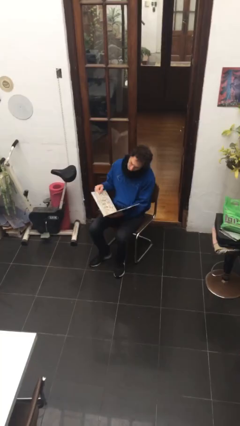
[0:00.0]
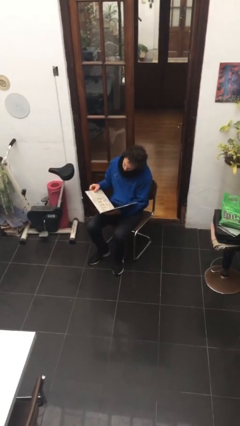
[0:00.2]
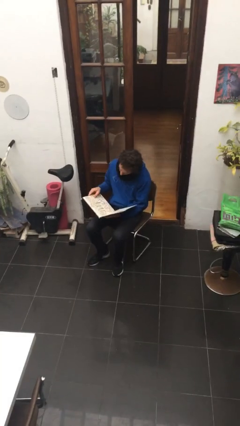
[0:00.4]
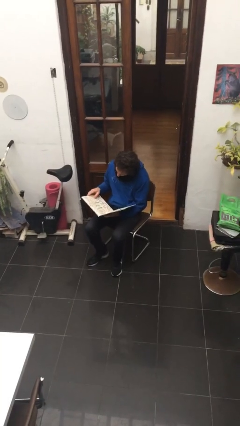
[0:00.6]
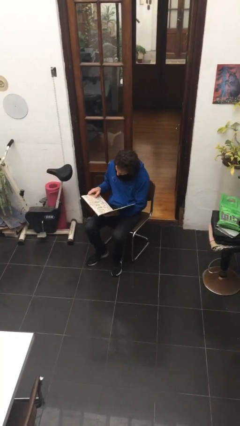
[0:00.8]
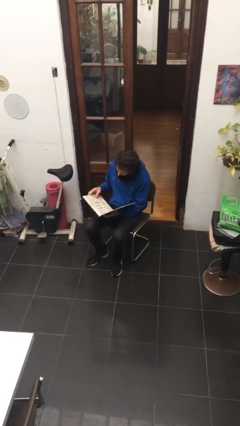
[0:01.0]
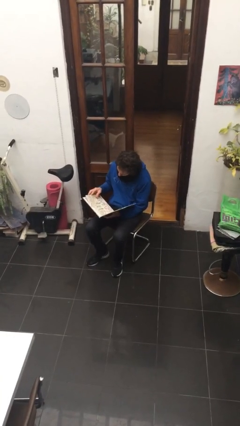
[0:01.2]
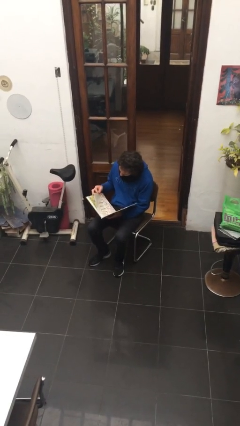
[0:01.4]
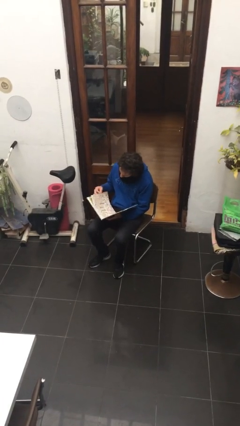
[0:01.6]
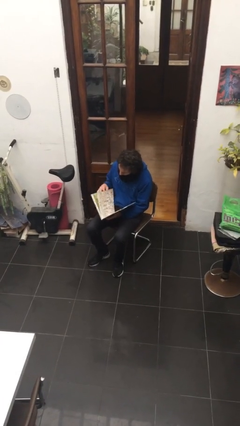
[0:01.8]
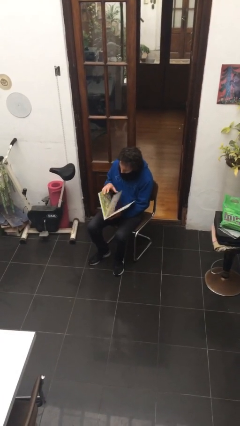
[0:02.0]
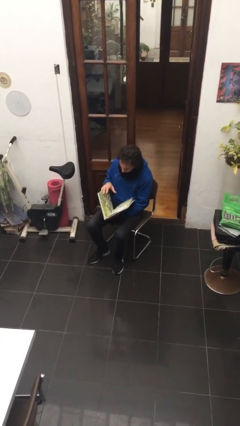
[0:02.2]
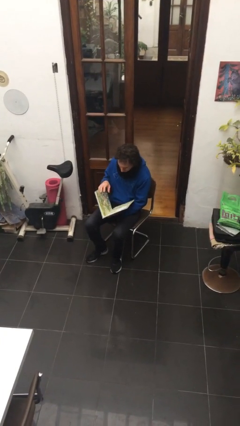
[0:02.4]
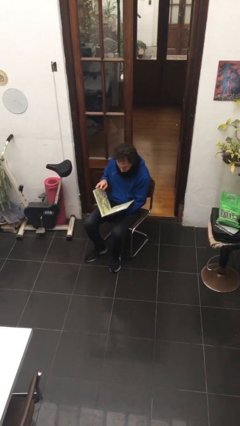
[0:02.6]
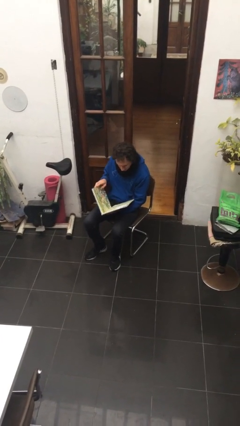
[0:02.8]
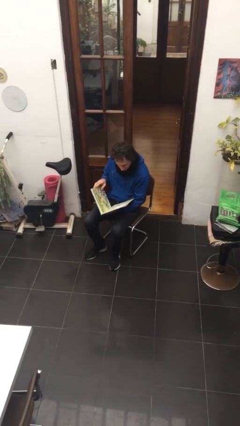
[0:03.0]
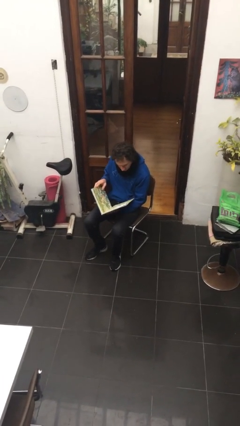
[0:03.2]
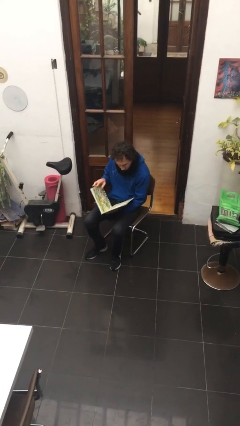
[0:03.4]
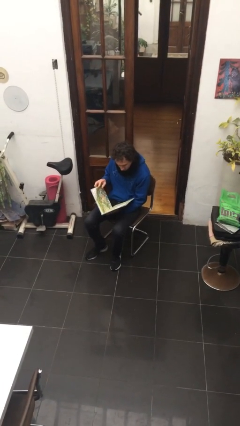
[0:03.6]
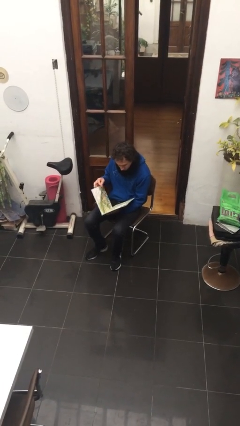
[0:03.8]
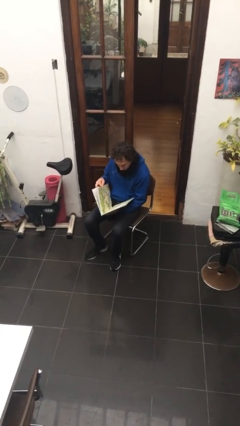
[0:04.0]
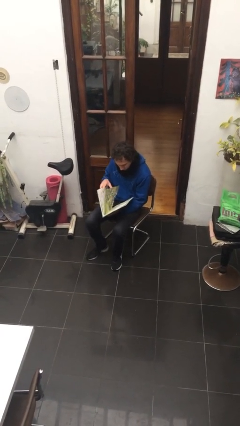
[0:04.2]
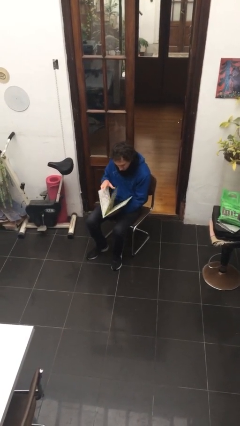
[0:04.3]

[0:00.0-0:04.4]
person reads document

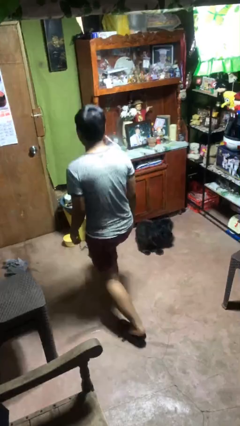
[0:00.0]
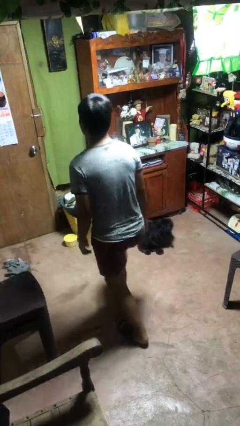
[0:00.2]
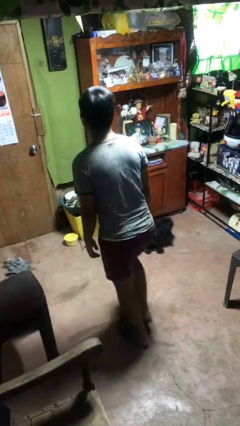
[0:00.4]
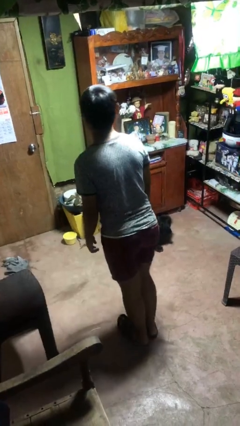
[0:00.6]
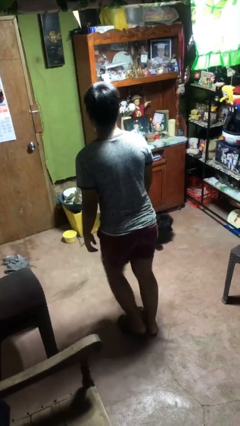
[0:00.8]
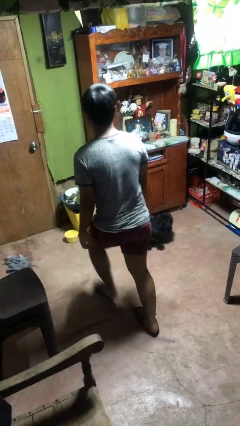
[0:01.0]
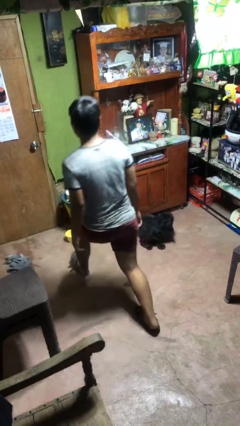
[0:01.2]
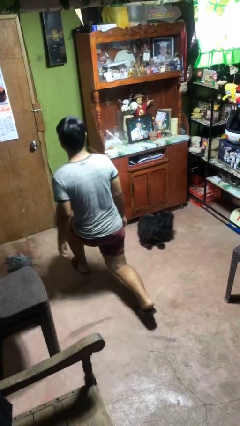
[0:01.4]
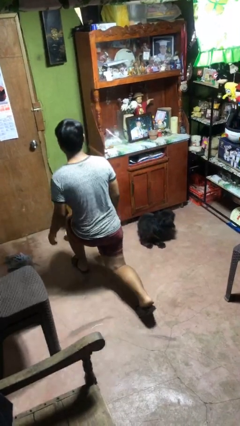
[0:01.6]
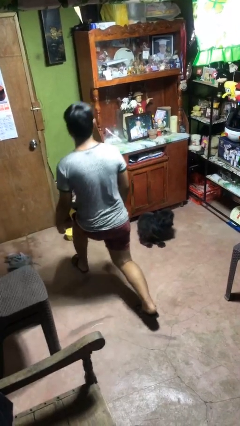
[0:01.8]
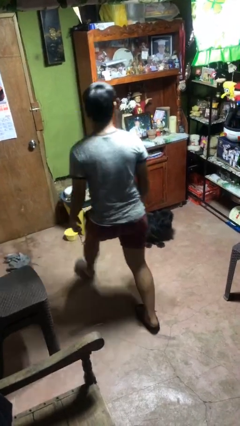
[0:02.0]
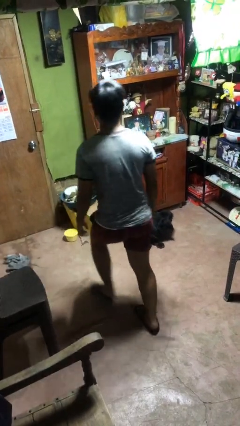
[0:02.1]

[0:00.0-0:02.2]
person exercises with lunges

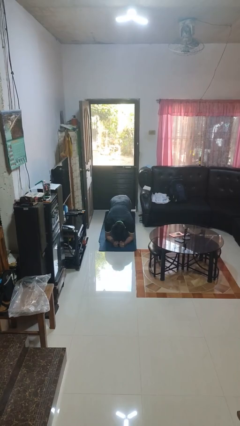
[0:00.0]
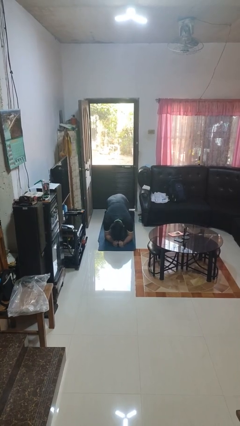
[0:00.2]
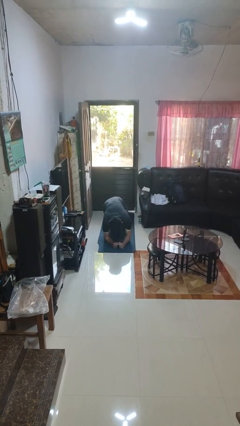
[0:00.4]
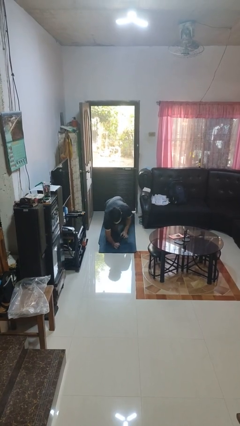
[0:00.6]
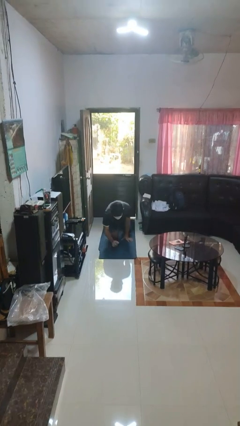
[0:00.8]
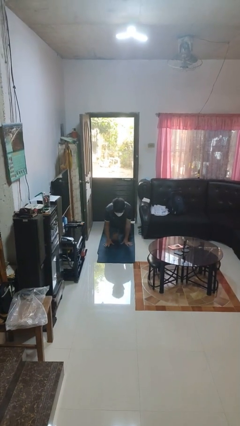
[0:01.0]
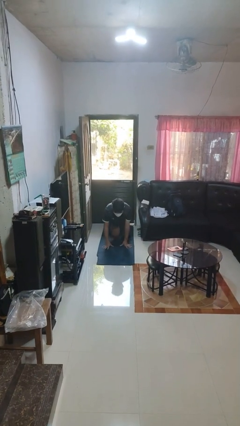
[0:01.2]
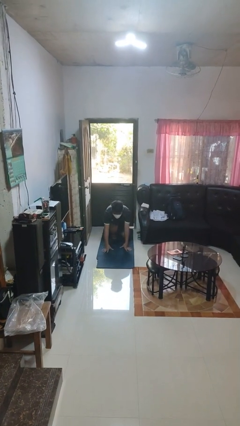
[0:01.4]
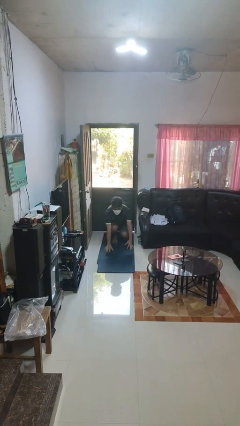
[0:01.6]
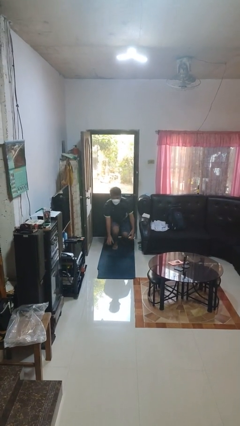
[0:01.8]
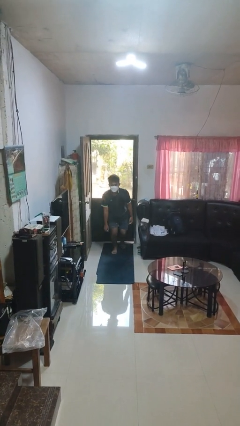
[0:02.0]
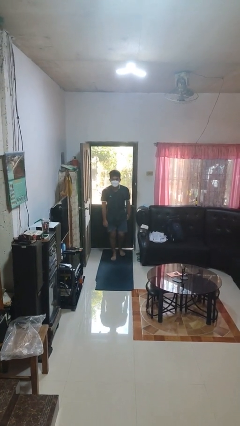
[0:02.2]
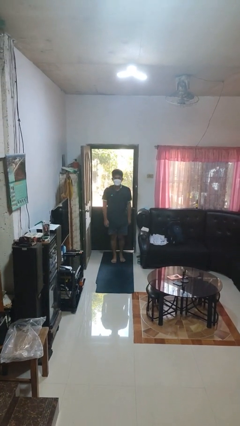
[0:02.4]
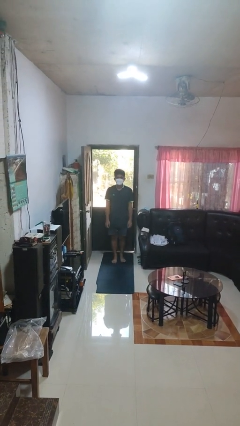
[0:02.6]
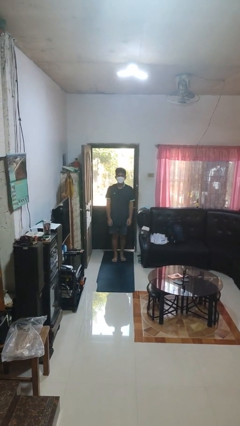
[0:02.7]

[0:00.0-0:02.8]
person stands up from floor

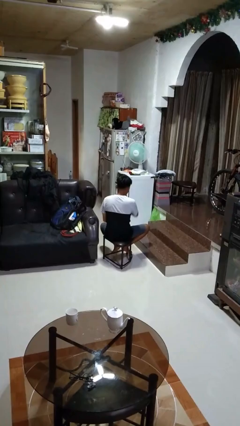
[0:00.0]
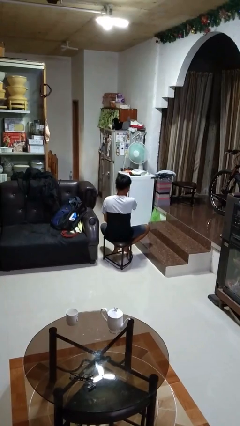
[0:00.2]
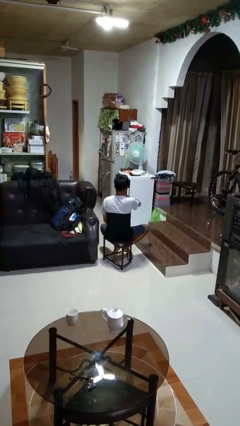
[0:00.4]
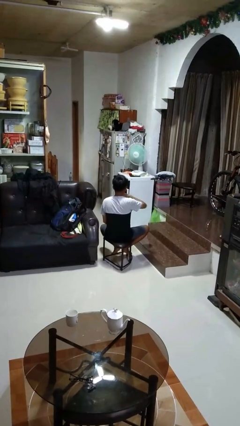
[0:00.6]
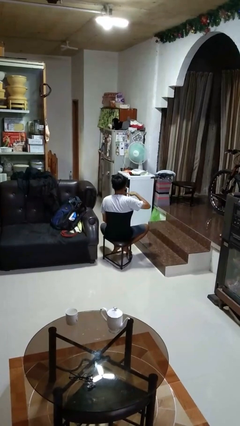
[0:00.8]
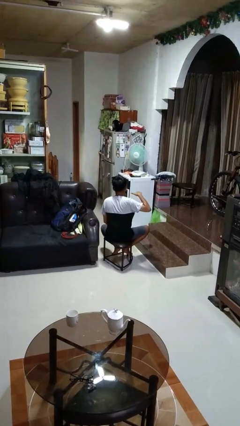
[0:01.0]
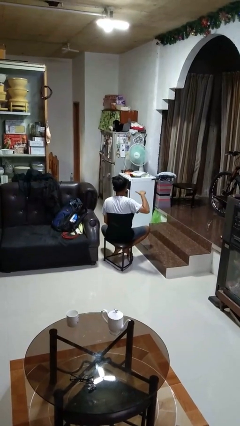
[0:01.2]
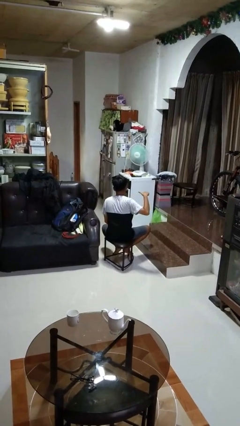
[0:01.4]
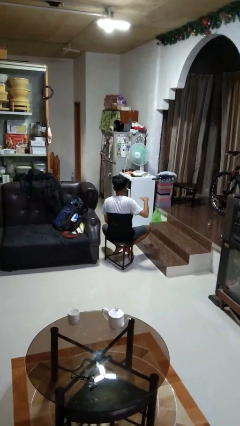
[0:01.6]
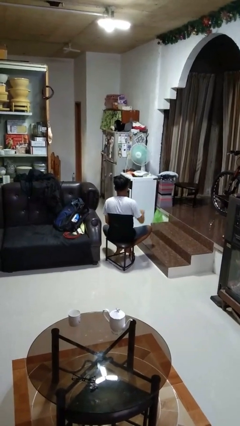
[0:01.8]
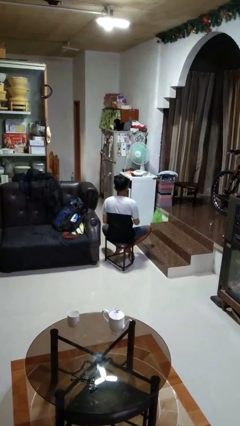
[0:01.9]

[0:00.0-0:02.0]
person gestures cut

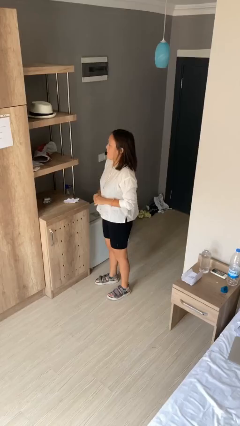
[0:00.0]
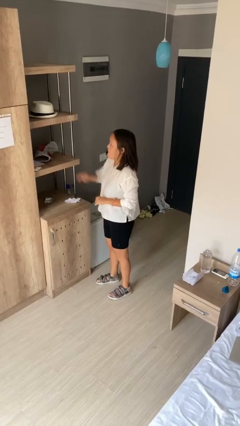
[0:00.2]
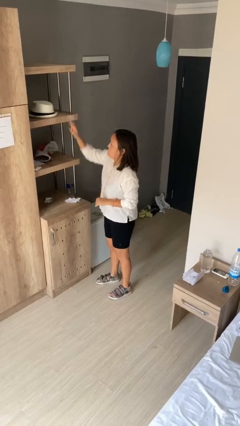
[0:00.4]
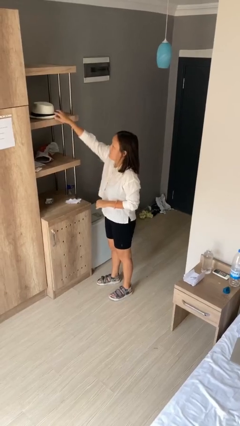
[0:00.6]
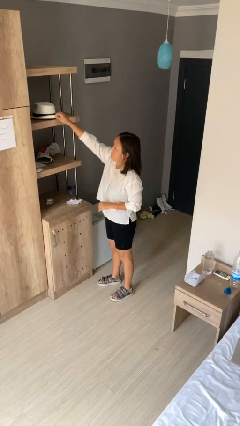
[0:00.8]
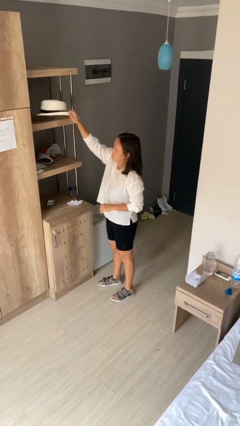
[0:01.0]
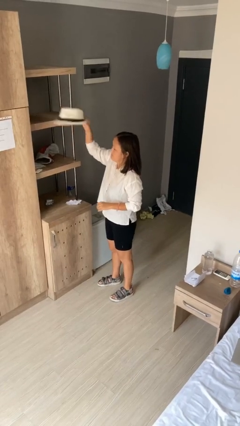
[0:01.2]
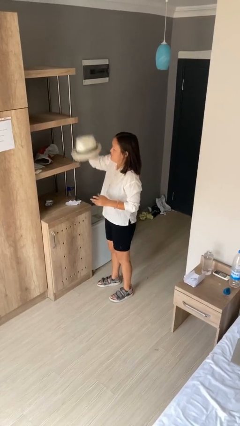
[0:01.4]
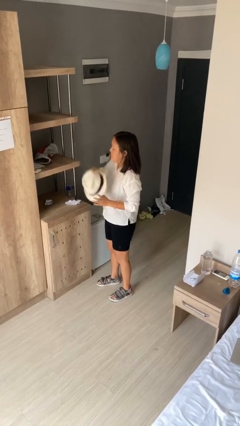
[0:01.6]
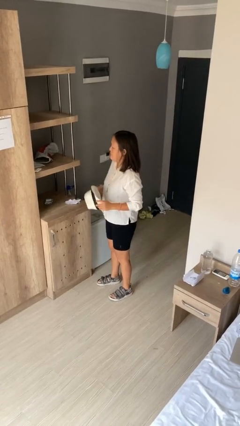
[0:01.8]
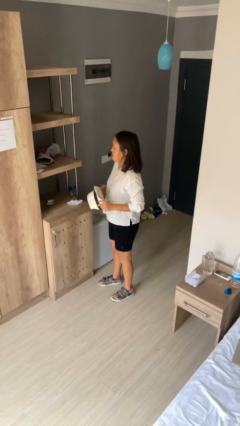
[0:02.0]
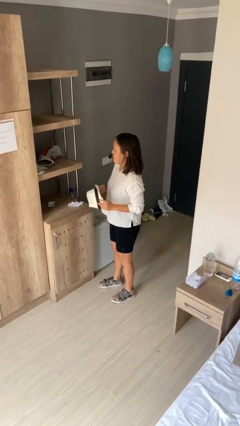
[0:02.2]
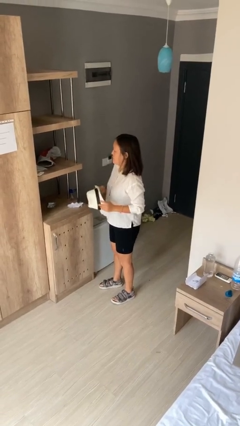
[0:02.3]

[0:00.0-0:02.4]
person picks up object from shelf

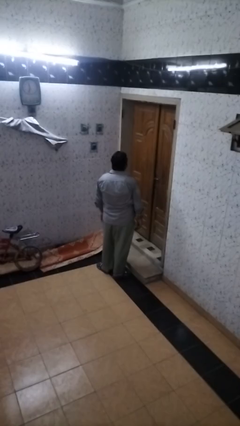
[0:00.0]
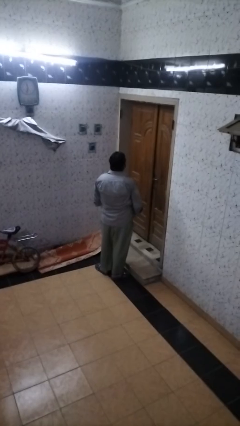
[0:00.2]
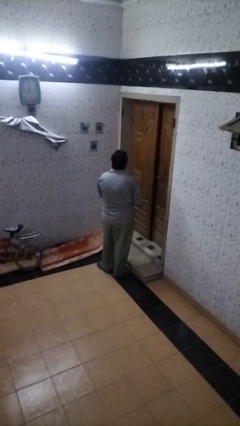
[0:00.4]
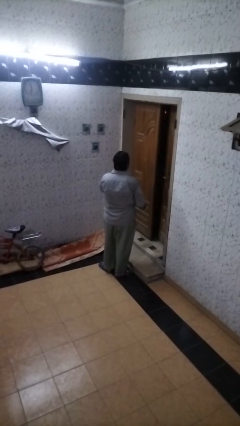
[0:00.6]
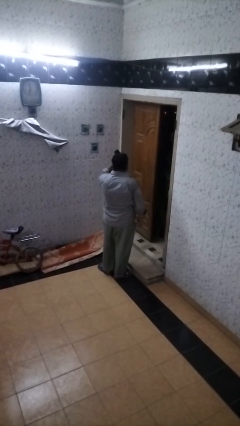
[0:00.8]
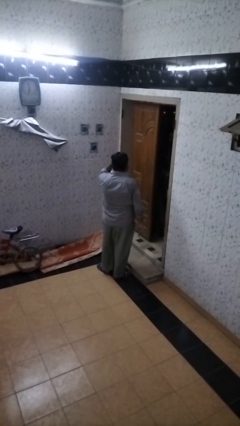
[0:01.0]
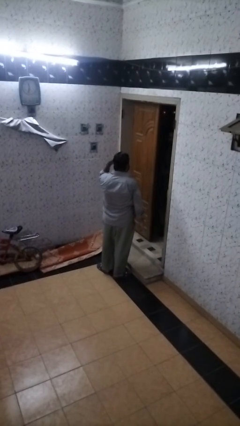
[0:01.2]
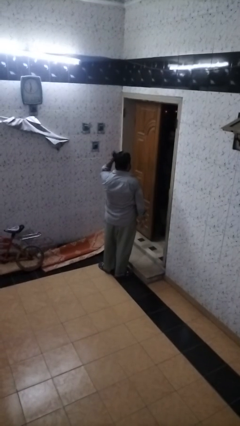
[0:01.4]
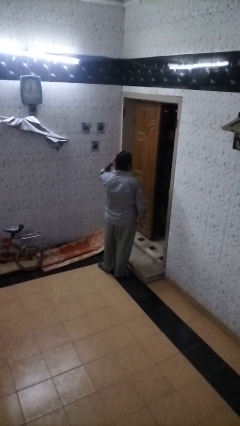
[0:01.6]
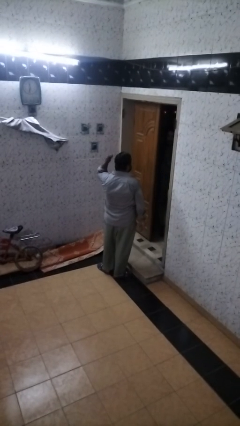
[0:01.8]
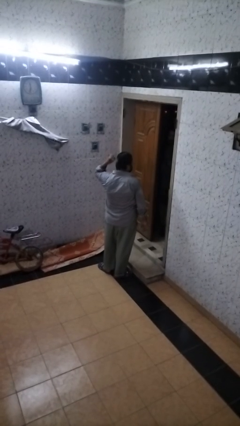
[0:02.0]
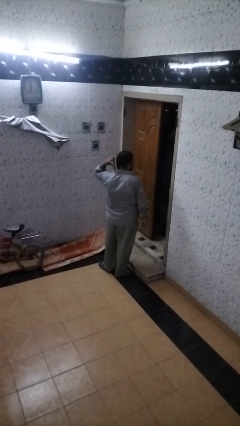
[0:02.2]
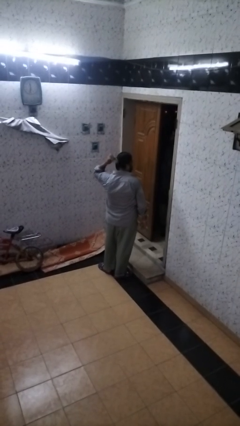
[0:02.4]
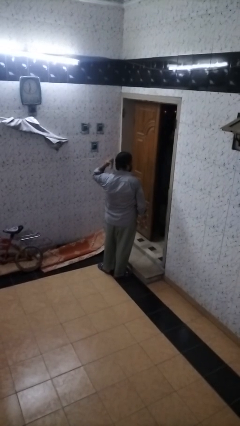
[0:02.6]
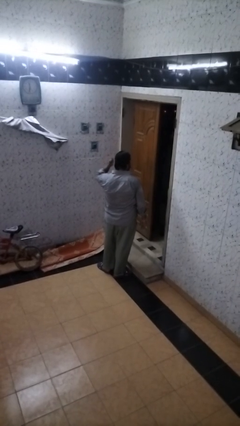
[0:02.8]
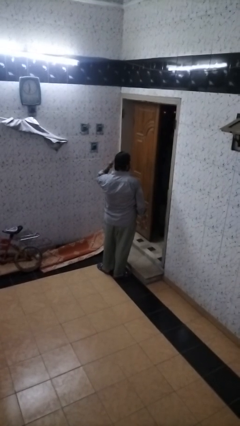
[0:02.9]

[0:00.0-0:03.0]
person brushes hair

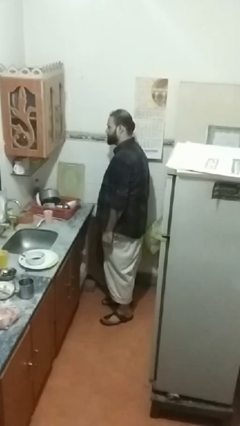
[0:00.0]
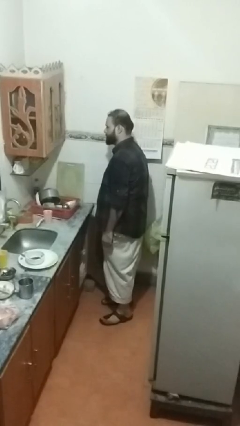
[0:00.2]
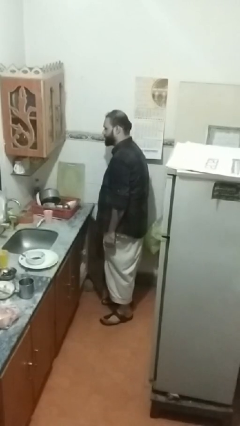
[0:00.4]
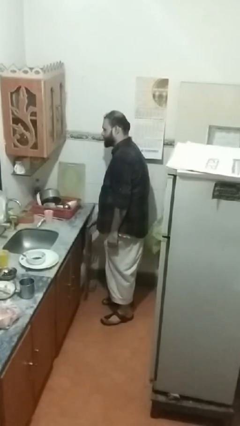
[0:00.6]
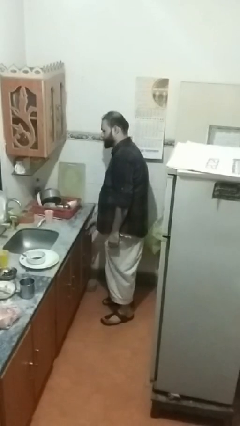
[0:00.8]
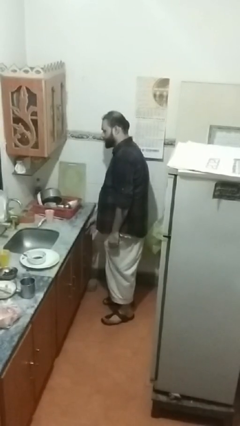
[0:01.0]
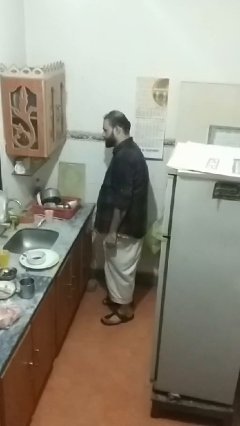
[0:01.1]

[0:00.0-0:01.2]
person closes cabinet
